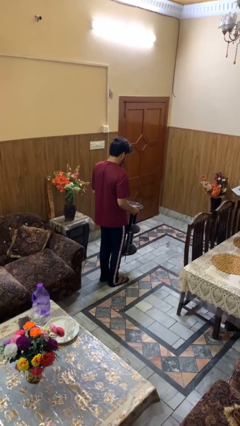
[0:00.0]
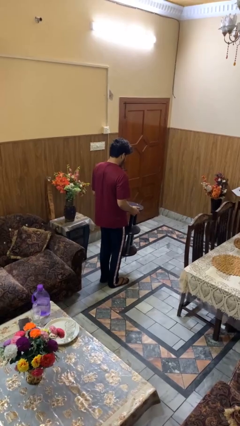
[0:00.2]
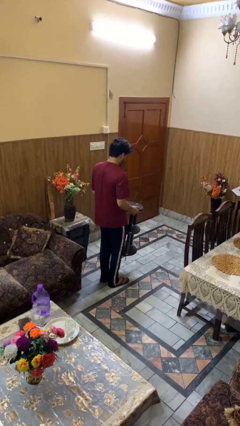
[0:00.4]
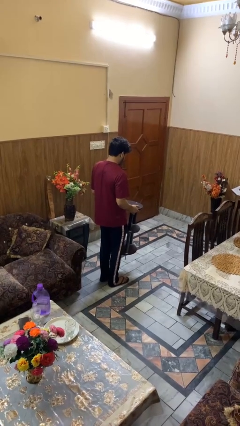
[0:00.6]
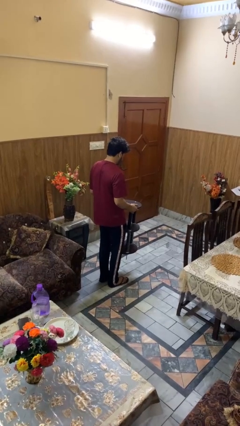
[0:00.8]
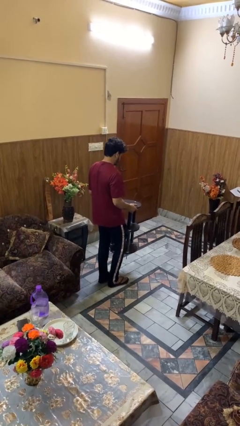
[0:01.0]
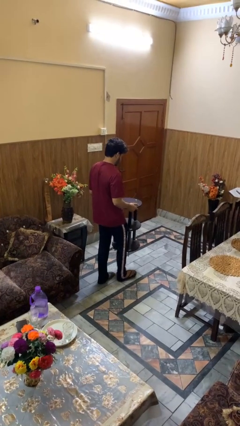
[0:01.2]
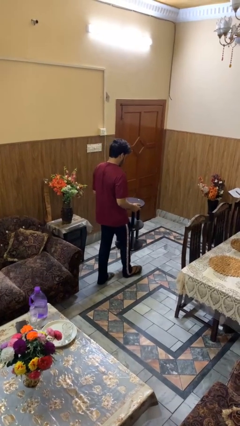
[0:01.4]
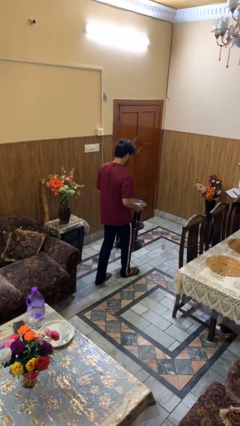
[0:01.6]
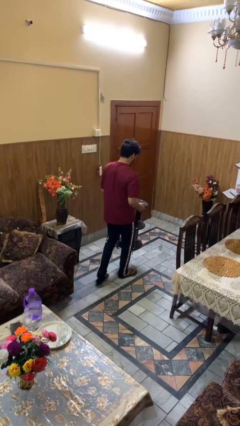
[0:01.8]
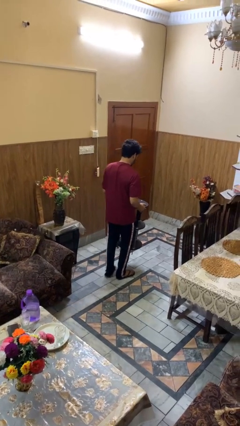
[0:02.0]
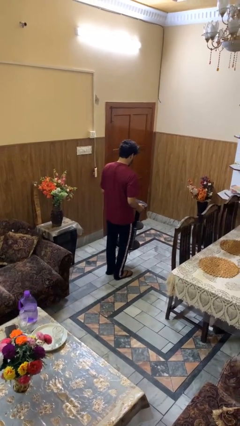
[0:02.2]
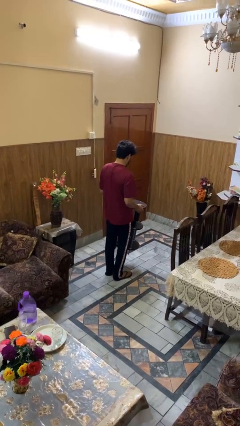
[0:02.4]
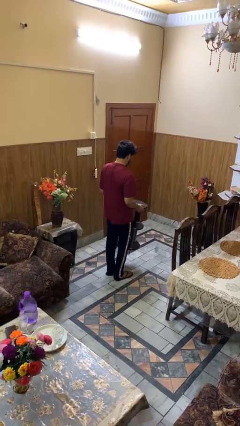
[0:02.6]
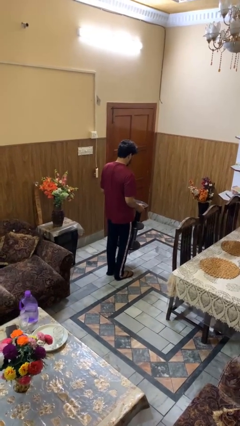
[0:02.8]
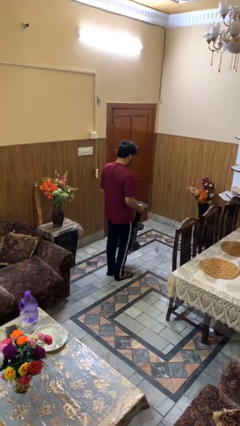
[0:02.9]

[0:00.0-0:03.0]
person carries furniture

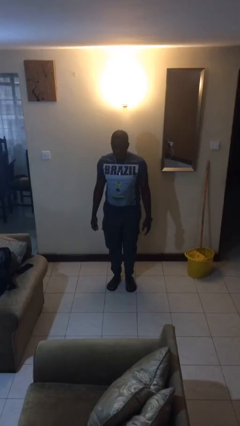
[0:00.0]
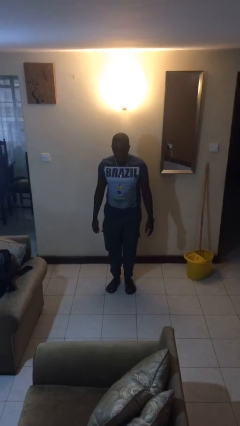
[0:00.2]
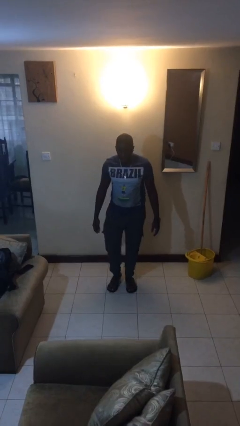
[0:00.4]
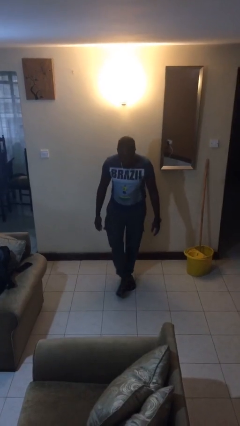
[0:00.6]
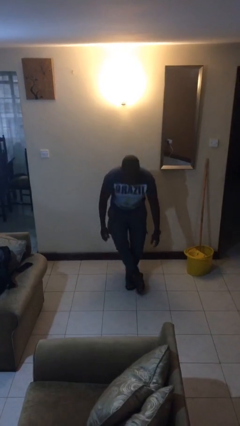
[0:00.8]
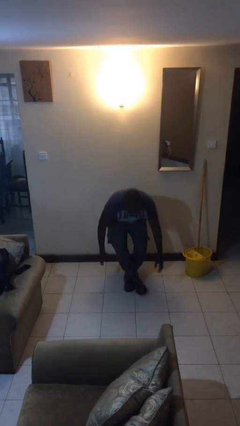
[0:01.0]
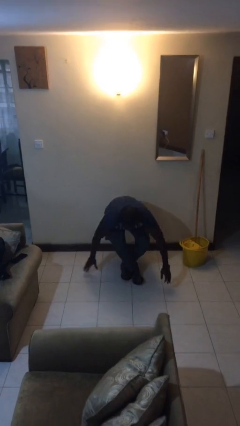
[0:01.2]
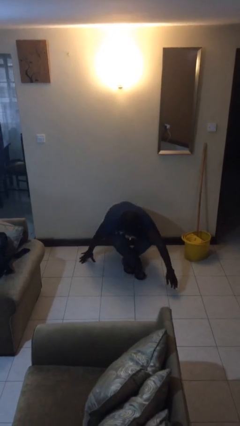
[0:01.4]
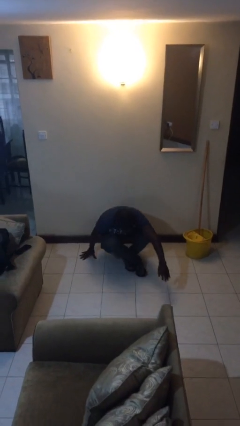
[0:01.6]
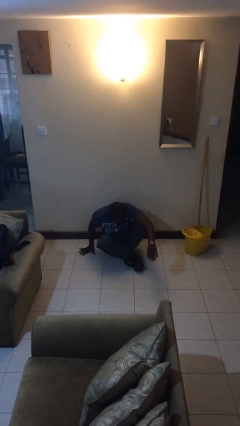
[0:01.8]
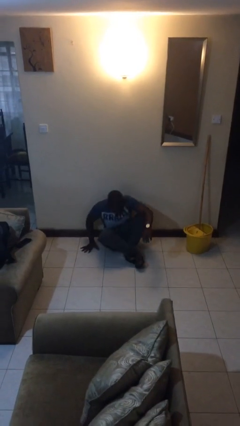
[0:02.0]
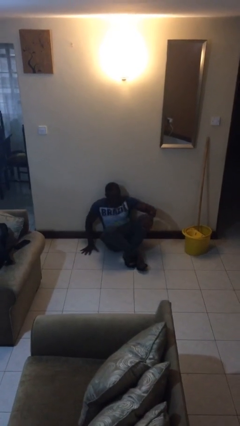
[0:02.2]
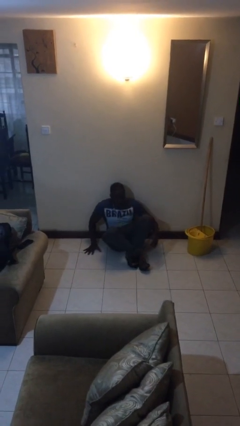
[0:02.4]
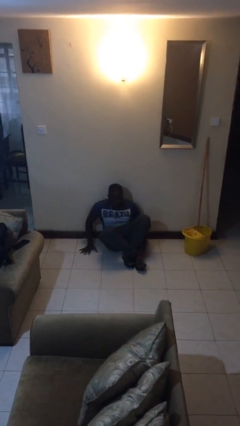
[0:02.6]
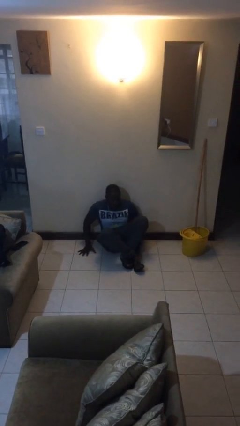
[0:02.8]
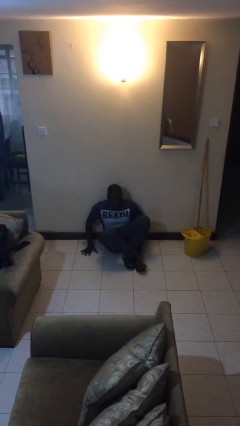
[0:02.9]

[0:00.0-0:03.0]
person sits crisscross

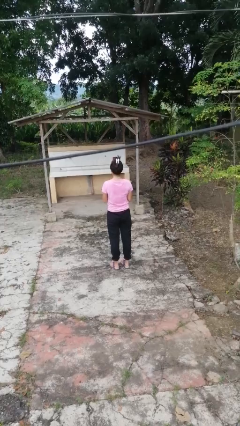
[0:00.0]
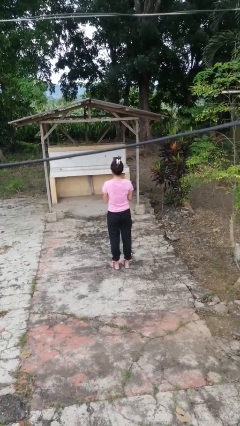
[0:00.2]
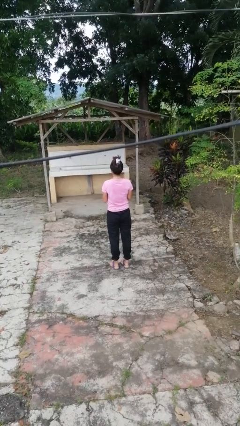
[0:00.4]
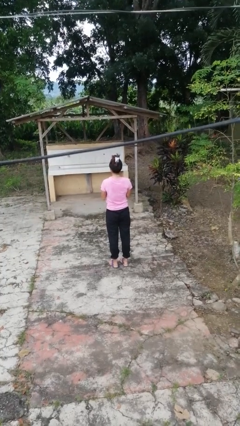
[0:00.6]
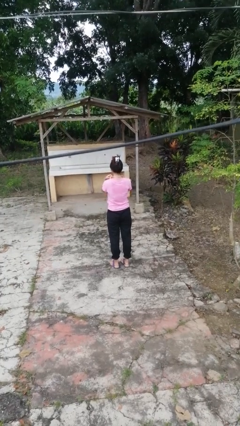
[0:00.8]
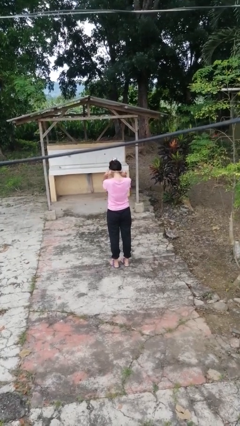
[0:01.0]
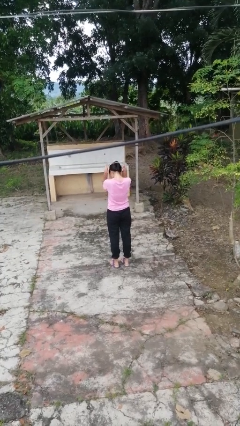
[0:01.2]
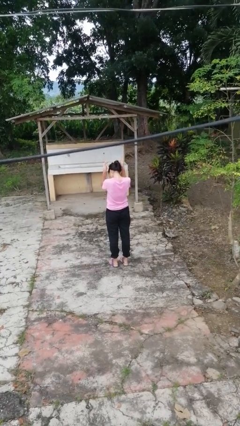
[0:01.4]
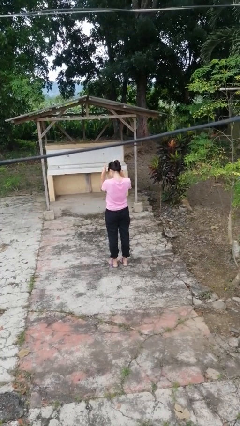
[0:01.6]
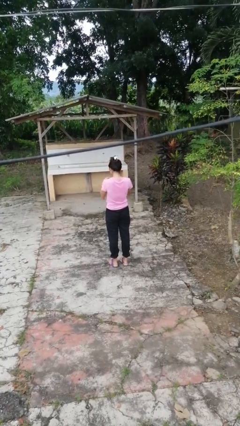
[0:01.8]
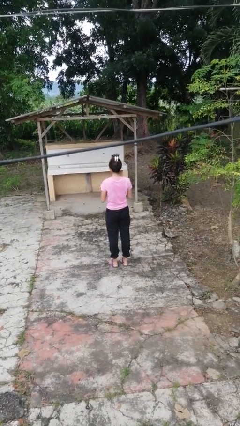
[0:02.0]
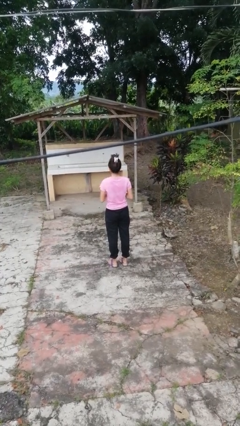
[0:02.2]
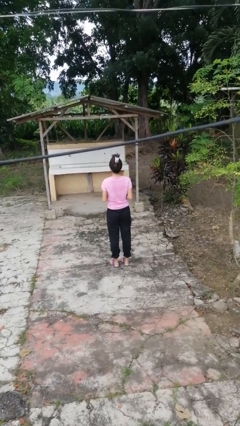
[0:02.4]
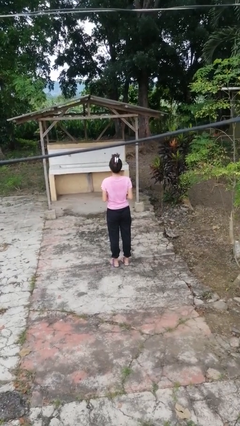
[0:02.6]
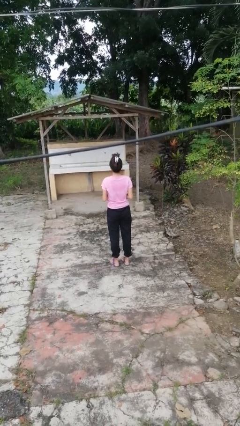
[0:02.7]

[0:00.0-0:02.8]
person takes off necklace

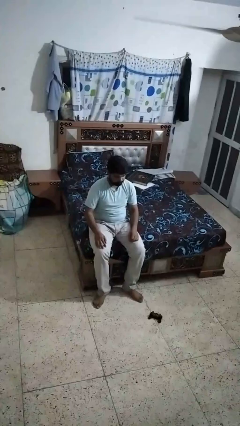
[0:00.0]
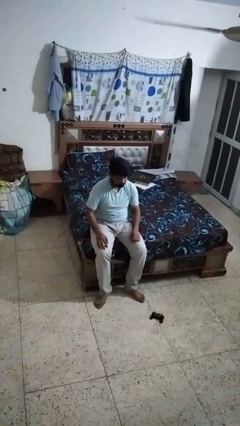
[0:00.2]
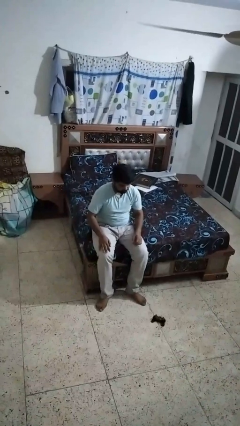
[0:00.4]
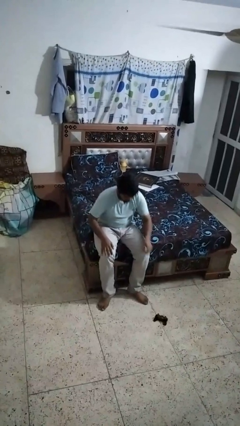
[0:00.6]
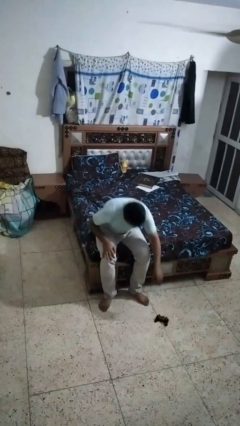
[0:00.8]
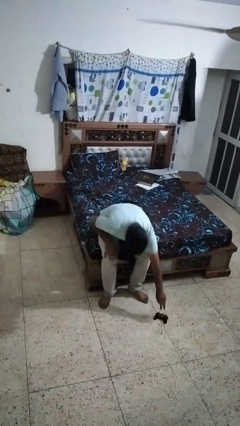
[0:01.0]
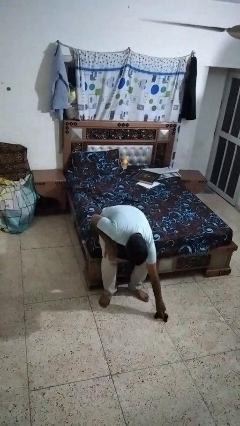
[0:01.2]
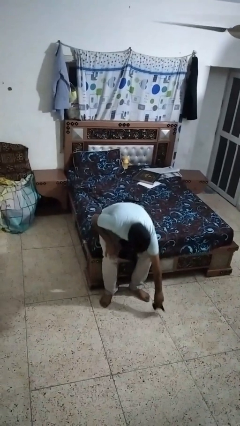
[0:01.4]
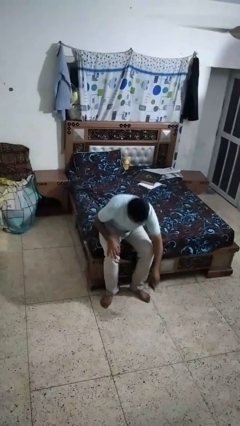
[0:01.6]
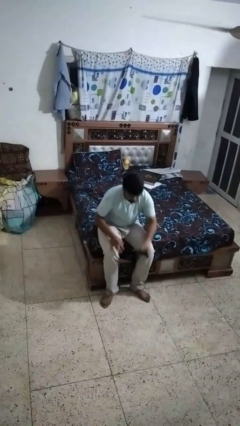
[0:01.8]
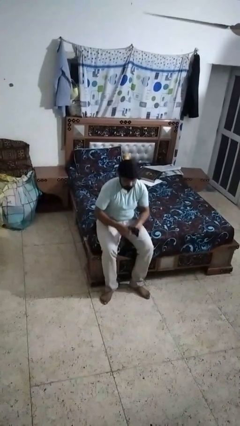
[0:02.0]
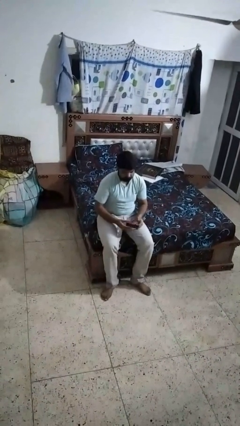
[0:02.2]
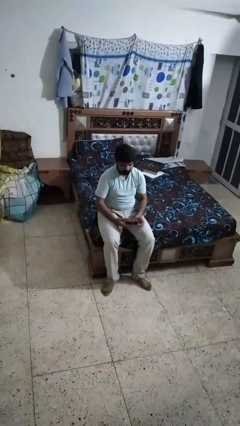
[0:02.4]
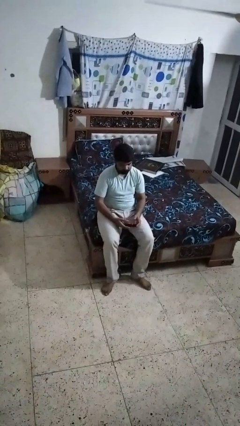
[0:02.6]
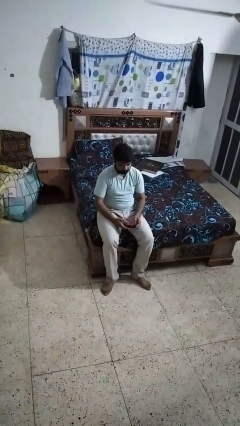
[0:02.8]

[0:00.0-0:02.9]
person picks up object from floor

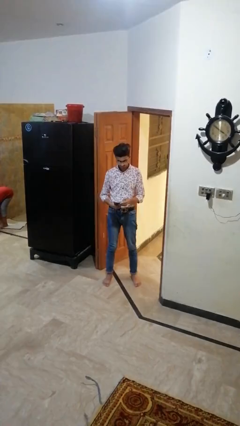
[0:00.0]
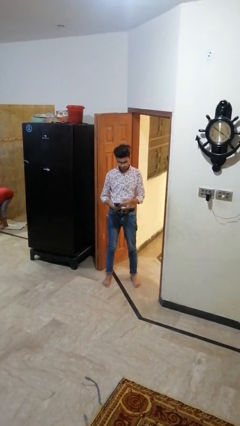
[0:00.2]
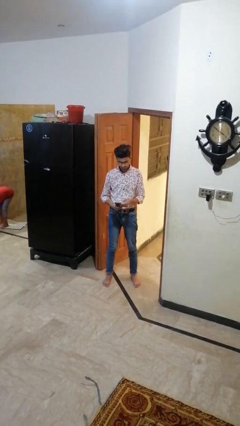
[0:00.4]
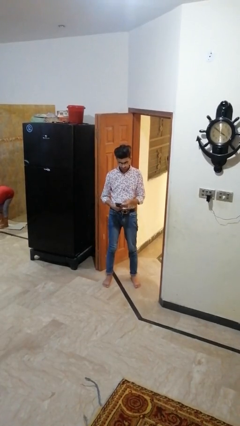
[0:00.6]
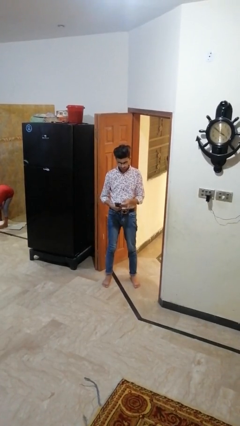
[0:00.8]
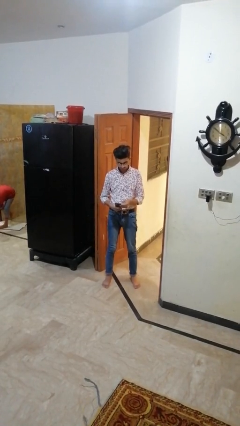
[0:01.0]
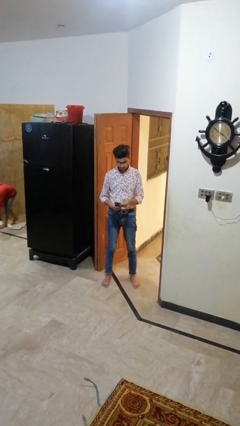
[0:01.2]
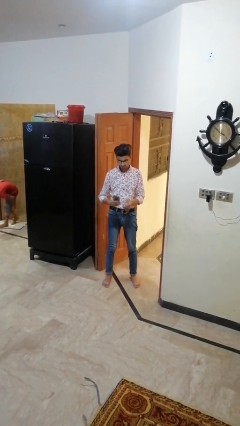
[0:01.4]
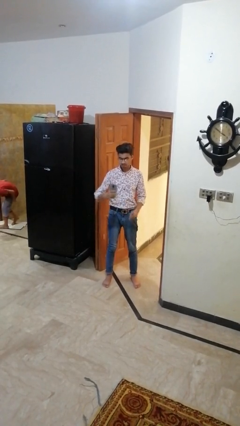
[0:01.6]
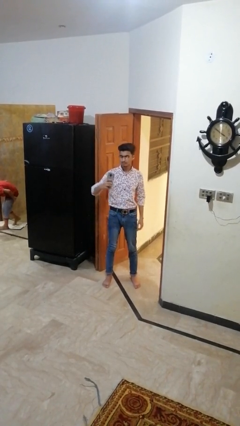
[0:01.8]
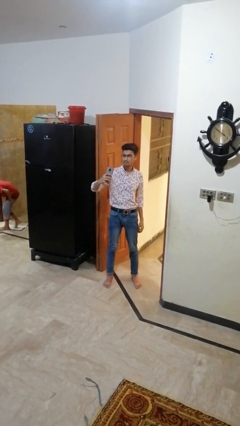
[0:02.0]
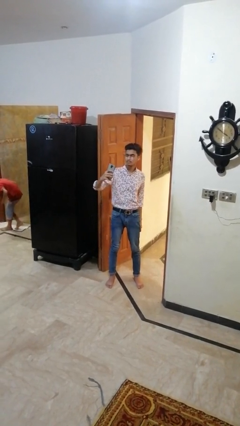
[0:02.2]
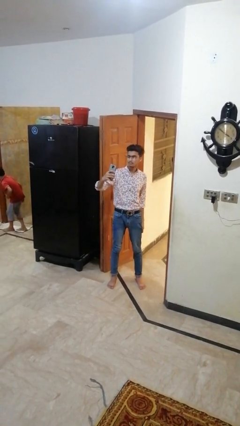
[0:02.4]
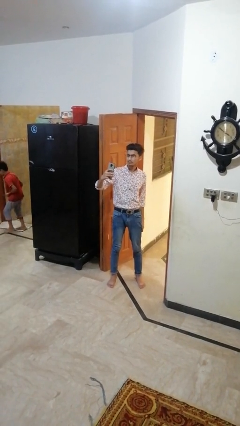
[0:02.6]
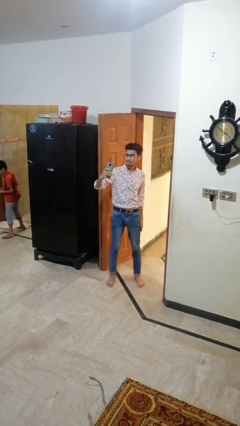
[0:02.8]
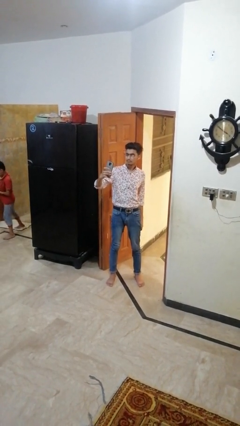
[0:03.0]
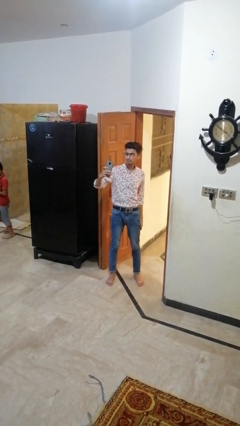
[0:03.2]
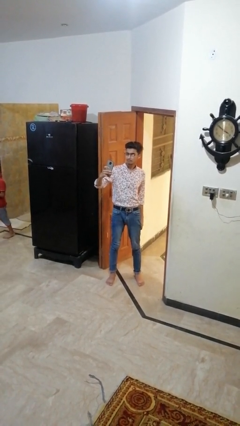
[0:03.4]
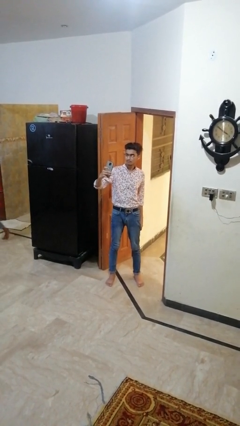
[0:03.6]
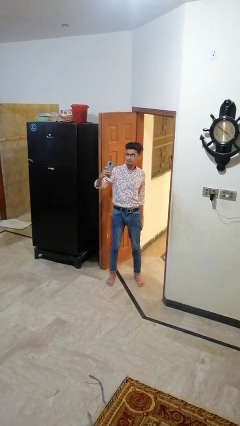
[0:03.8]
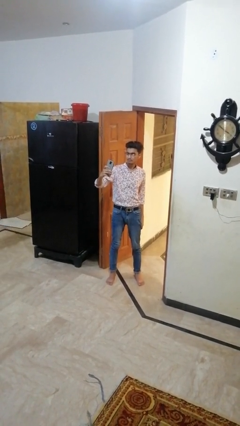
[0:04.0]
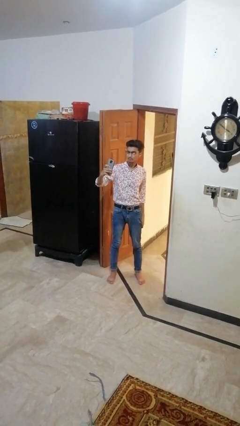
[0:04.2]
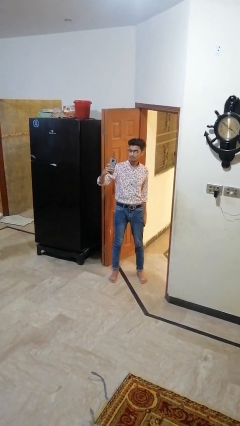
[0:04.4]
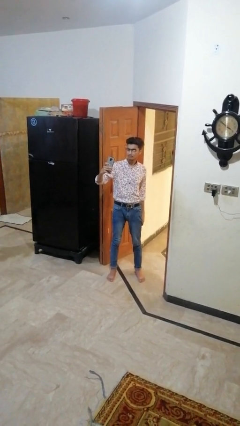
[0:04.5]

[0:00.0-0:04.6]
person takes selfie

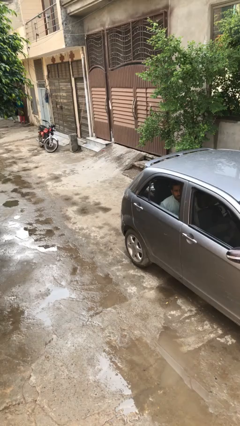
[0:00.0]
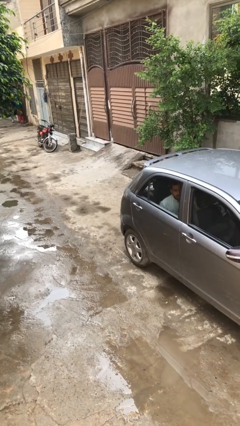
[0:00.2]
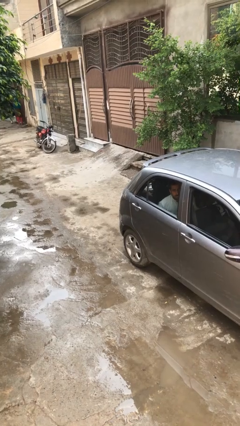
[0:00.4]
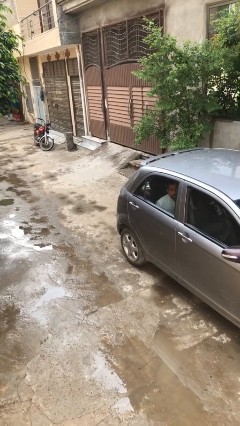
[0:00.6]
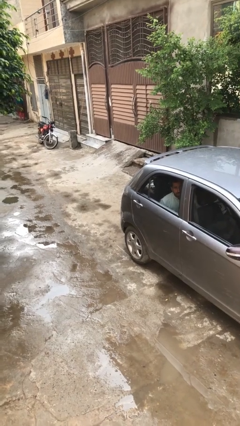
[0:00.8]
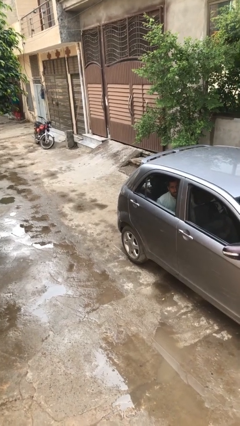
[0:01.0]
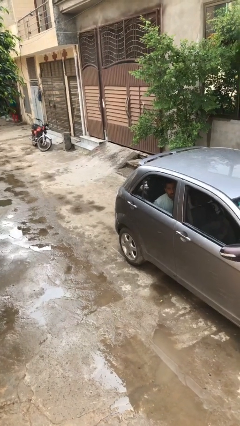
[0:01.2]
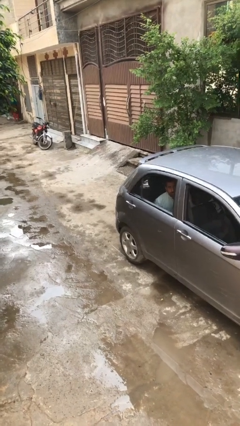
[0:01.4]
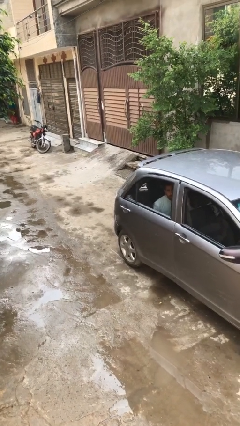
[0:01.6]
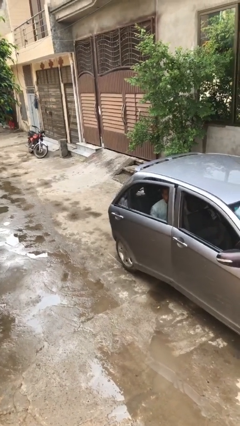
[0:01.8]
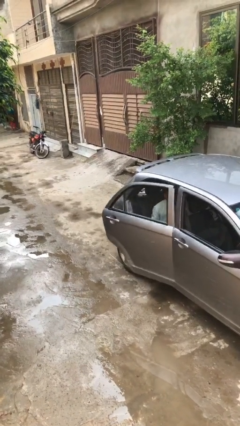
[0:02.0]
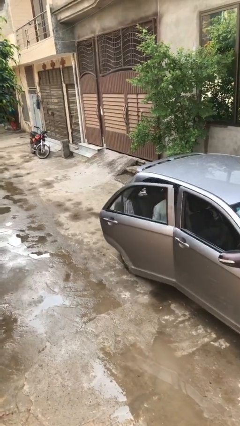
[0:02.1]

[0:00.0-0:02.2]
person opens car door
